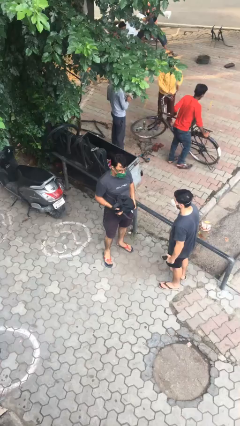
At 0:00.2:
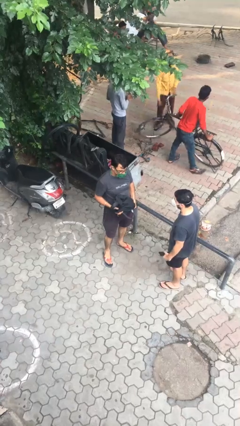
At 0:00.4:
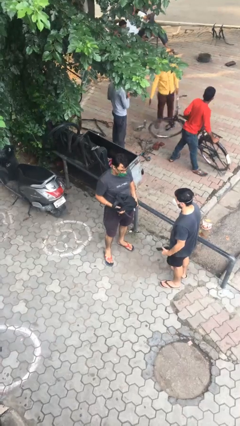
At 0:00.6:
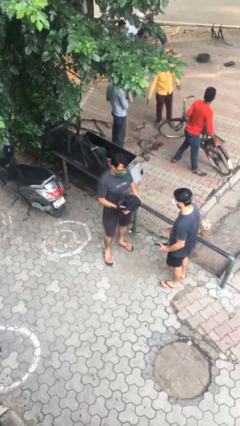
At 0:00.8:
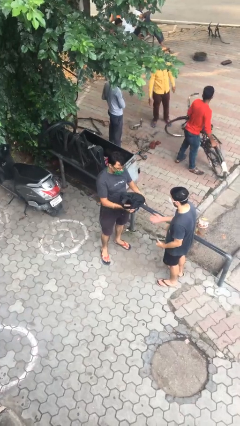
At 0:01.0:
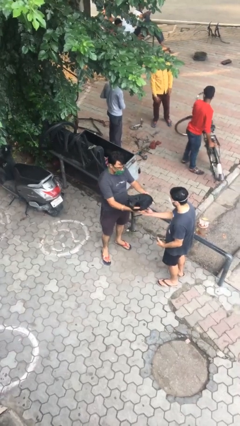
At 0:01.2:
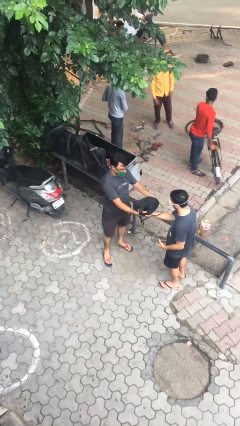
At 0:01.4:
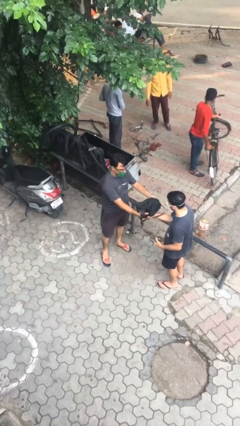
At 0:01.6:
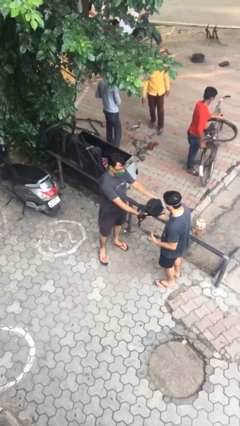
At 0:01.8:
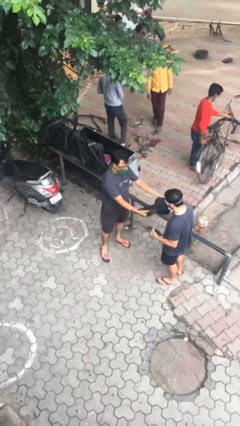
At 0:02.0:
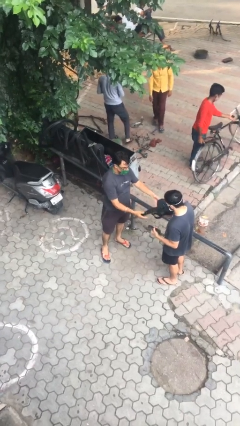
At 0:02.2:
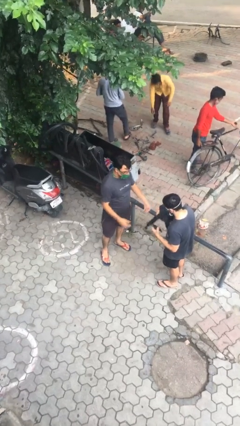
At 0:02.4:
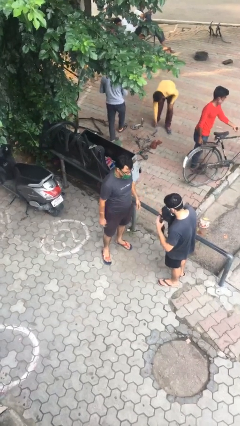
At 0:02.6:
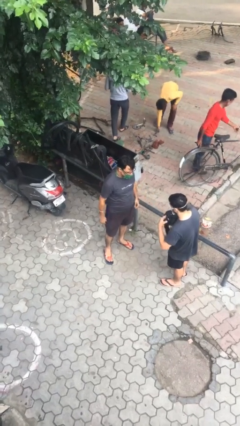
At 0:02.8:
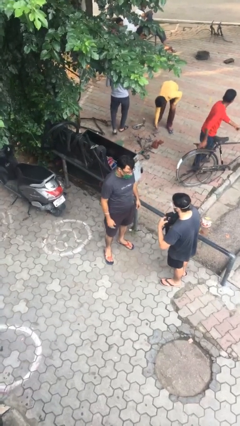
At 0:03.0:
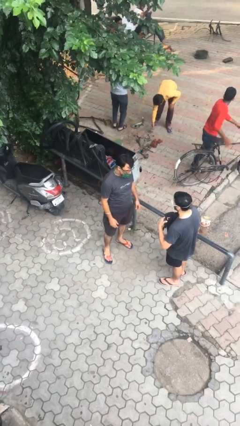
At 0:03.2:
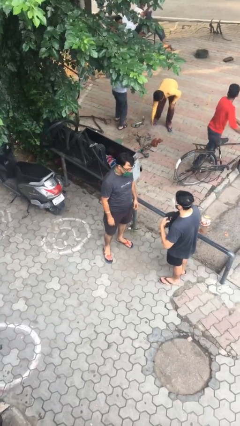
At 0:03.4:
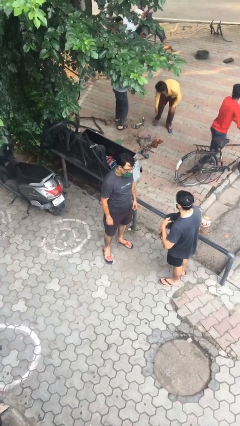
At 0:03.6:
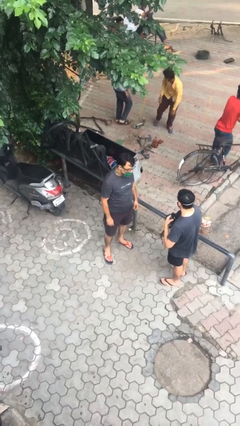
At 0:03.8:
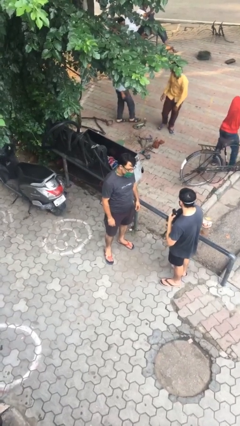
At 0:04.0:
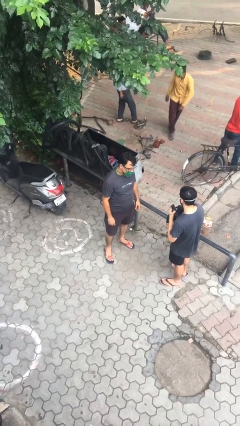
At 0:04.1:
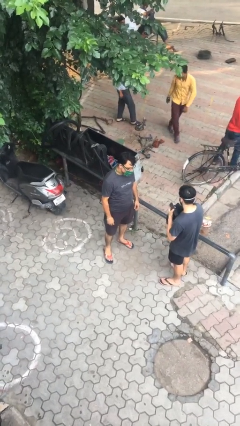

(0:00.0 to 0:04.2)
person transfers object to person

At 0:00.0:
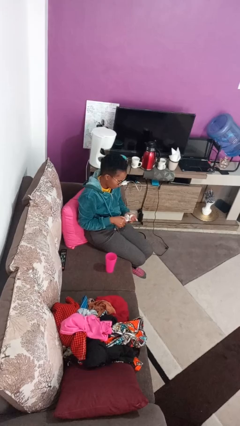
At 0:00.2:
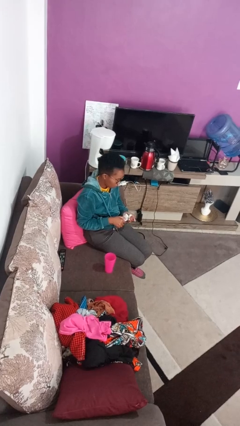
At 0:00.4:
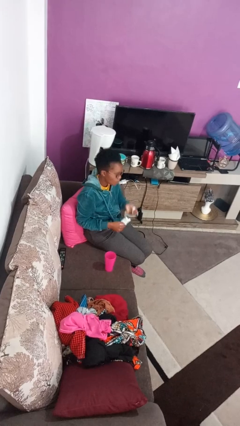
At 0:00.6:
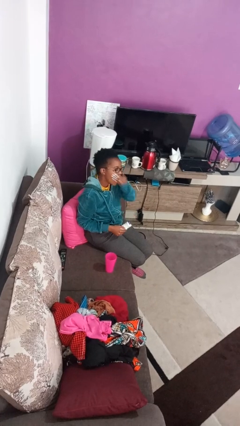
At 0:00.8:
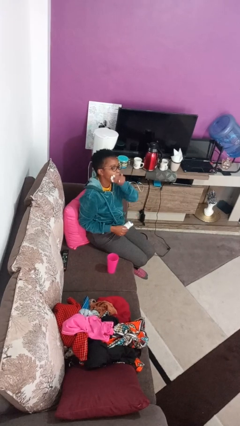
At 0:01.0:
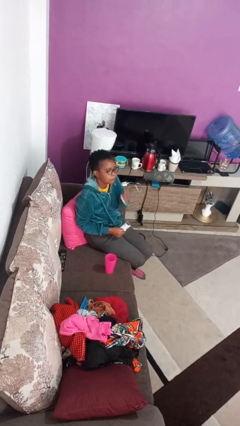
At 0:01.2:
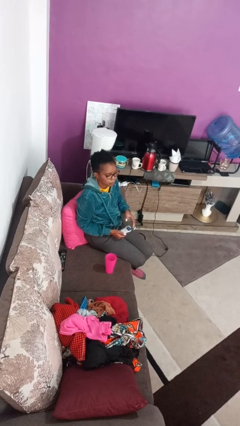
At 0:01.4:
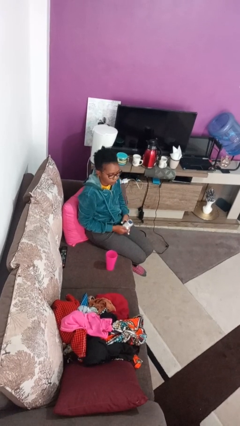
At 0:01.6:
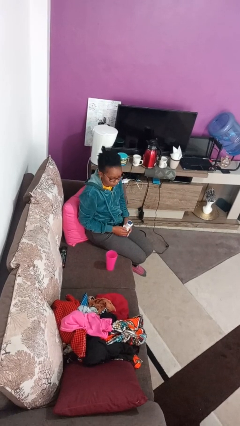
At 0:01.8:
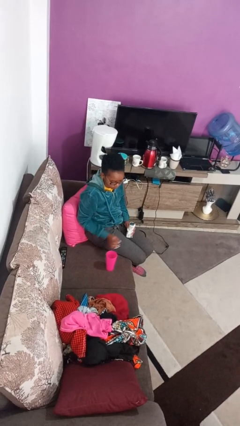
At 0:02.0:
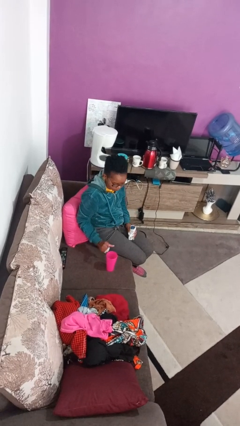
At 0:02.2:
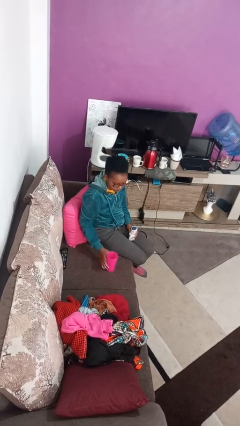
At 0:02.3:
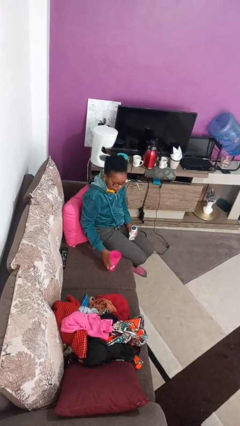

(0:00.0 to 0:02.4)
person takes medicine pills

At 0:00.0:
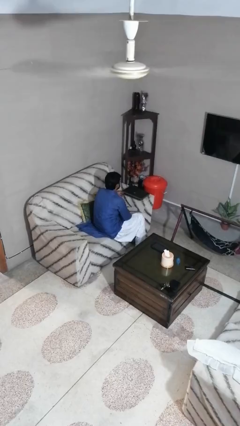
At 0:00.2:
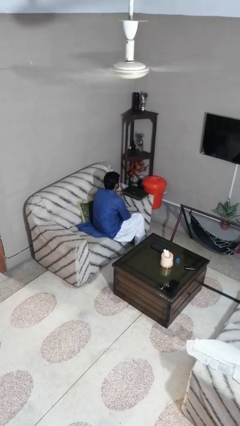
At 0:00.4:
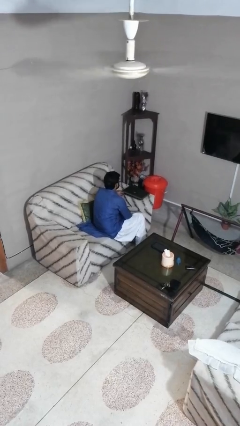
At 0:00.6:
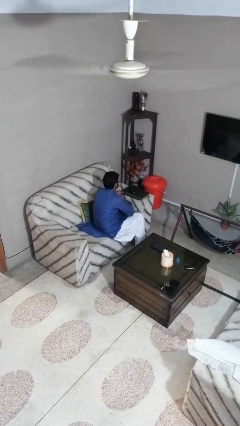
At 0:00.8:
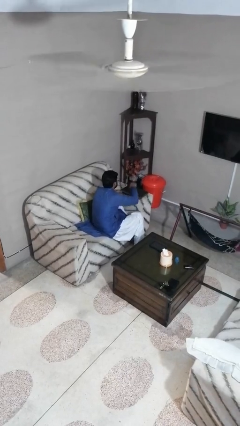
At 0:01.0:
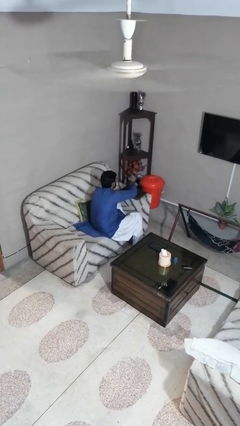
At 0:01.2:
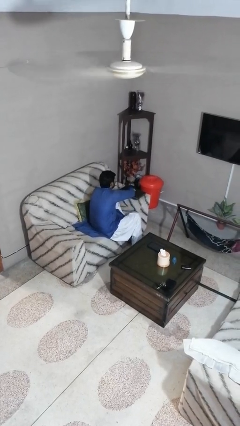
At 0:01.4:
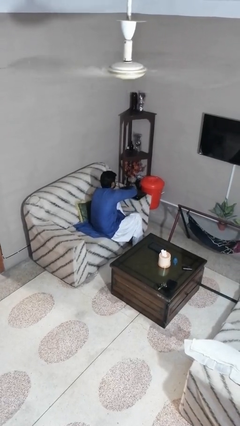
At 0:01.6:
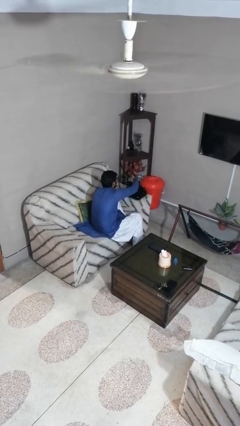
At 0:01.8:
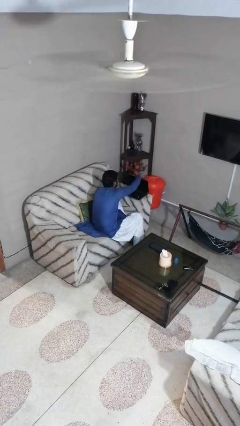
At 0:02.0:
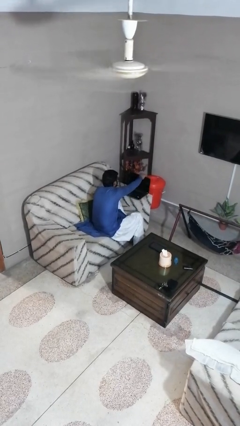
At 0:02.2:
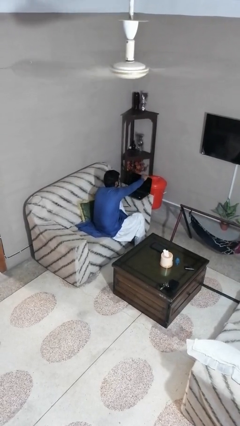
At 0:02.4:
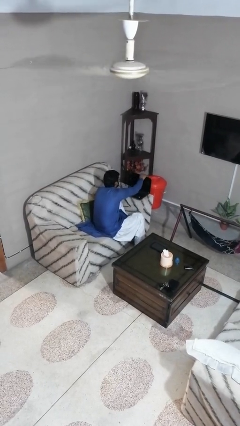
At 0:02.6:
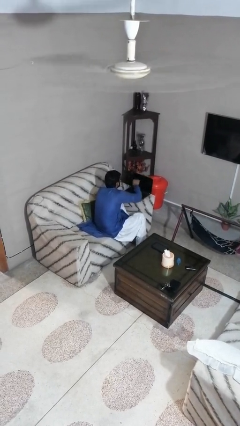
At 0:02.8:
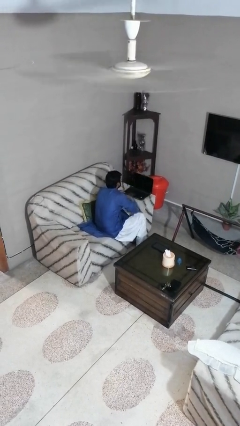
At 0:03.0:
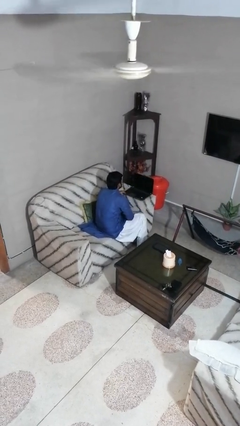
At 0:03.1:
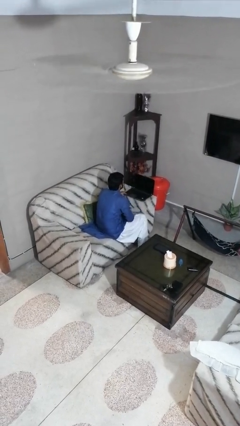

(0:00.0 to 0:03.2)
person opens laptop

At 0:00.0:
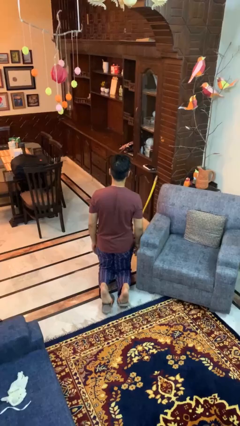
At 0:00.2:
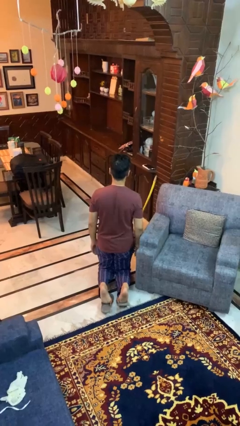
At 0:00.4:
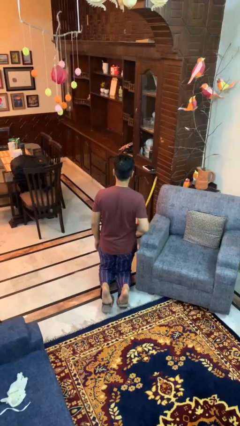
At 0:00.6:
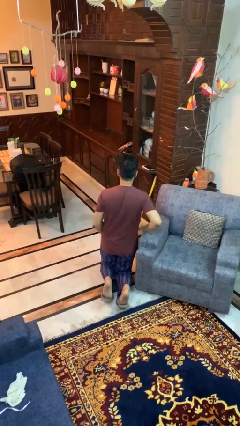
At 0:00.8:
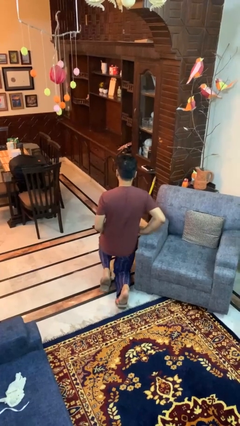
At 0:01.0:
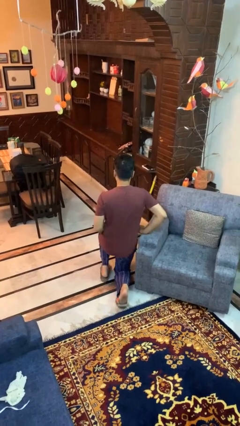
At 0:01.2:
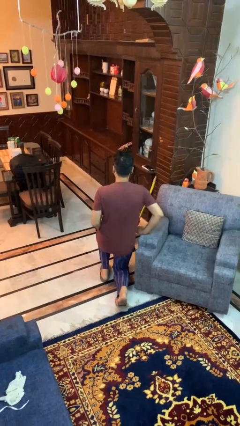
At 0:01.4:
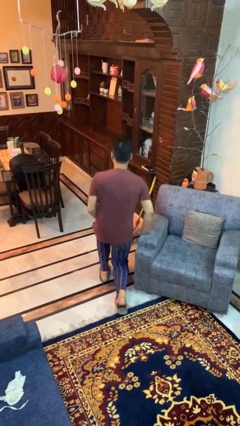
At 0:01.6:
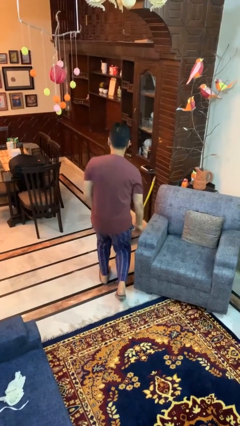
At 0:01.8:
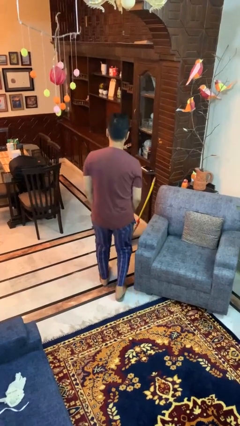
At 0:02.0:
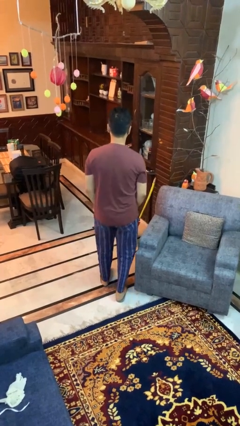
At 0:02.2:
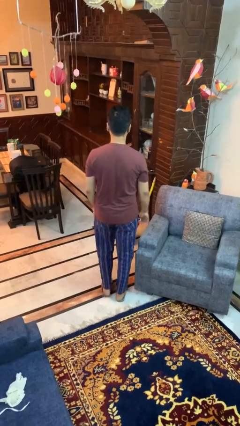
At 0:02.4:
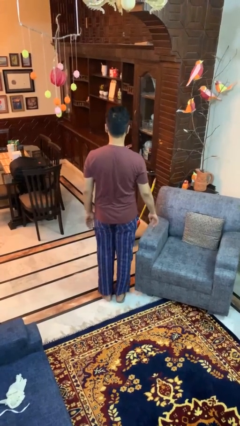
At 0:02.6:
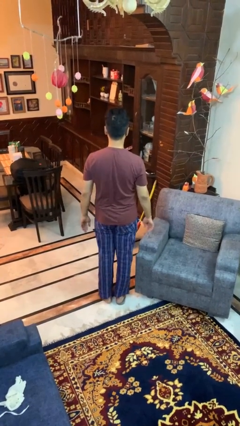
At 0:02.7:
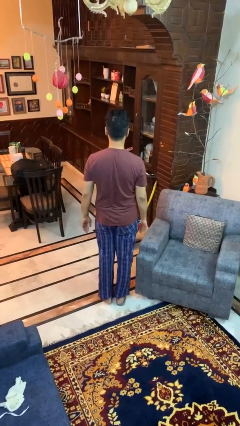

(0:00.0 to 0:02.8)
person stands up from floor

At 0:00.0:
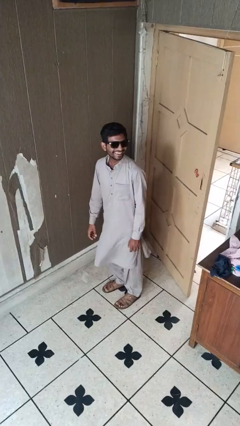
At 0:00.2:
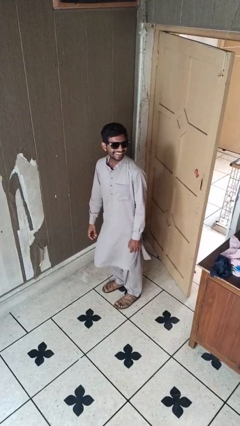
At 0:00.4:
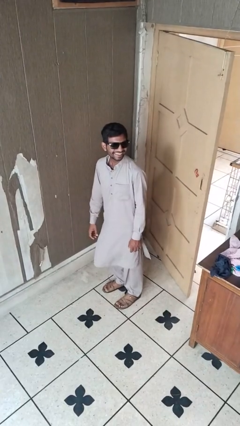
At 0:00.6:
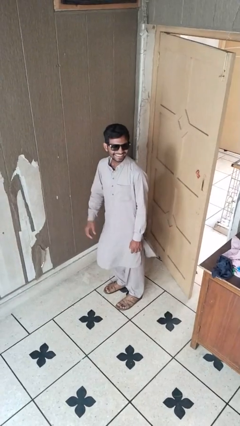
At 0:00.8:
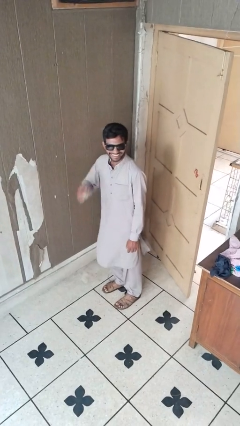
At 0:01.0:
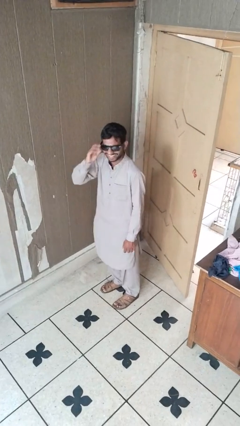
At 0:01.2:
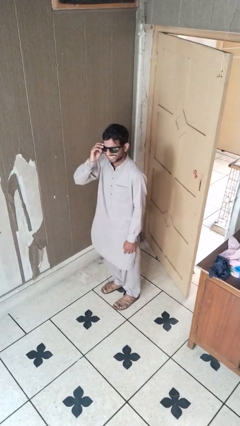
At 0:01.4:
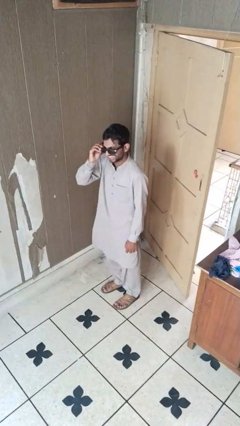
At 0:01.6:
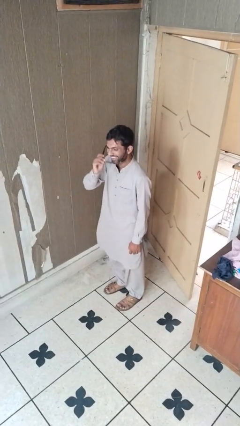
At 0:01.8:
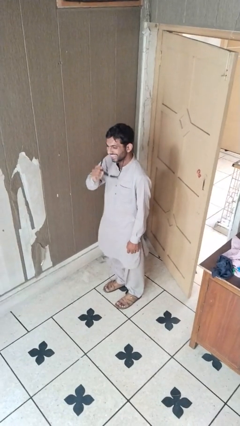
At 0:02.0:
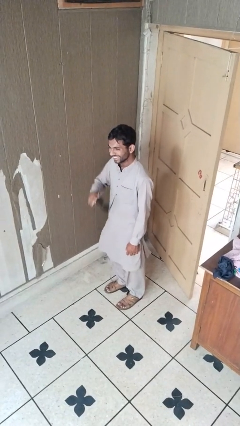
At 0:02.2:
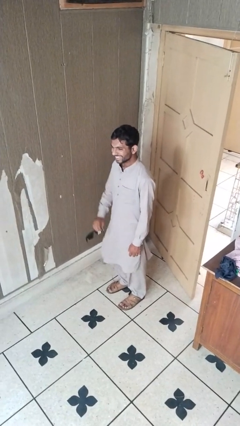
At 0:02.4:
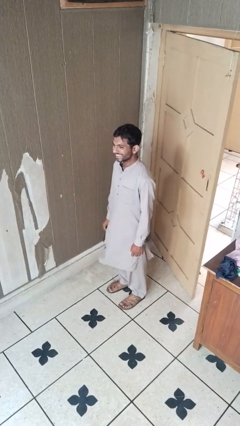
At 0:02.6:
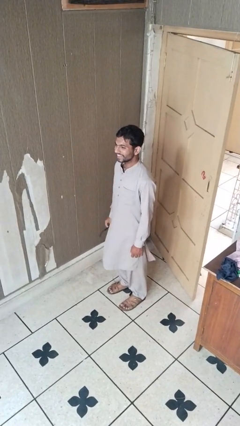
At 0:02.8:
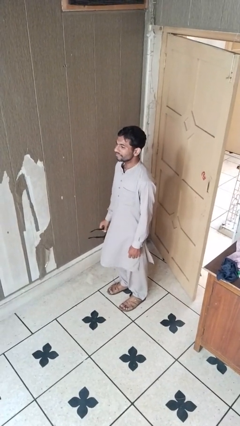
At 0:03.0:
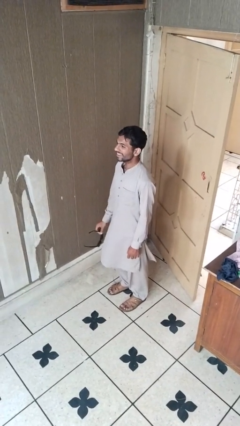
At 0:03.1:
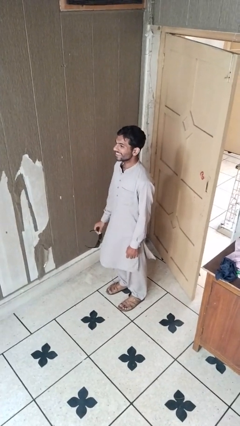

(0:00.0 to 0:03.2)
person takes off sunglasses

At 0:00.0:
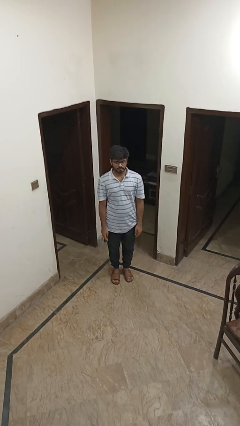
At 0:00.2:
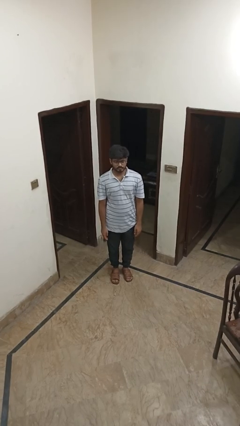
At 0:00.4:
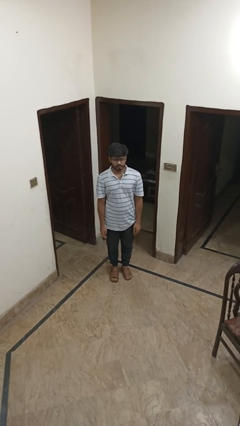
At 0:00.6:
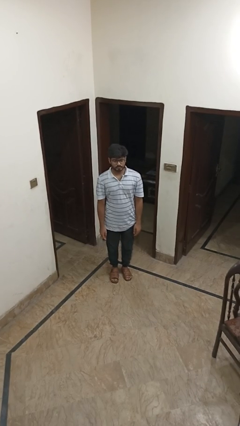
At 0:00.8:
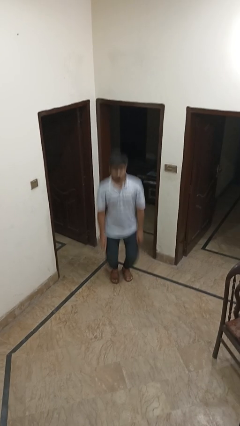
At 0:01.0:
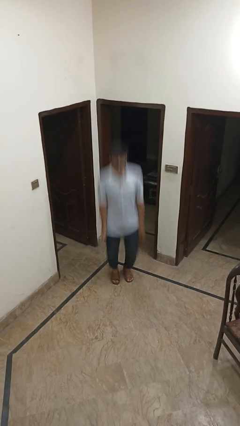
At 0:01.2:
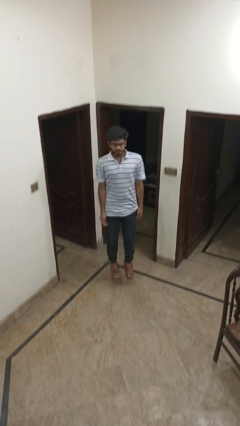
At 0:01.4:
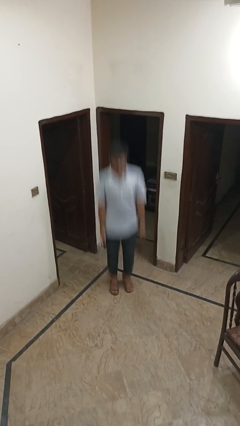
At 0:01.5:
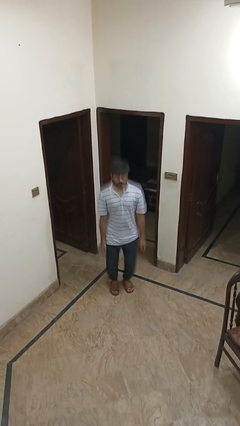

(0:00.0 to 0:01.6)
person jumps
